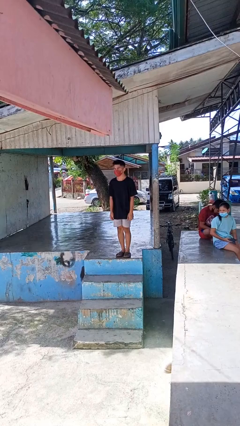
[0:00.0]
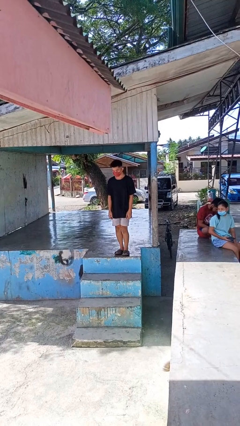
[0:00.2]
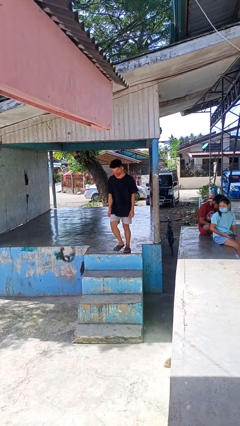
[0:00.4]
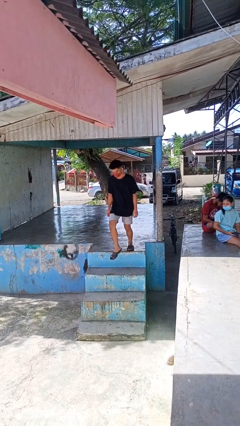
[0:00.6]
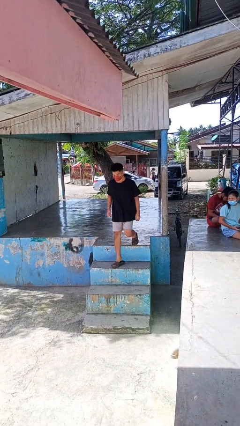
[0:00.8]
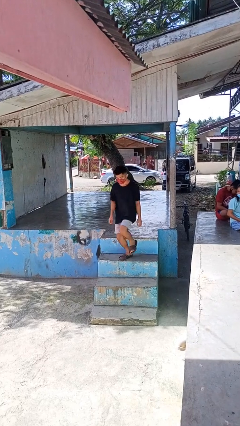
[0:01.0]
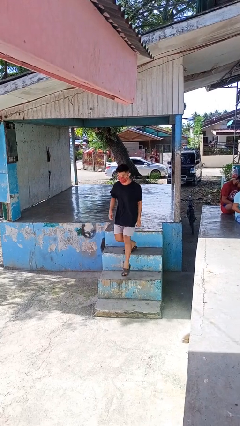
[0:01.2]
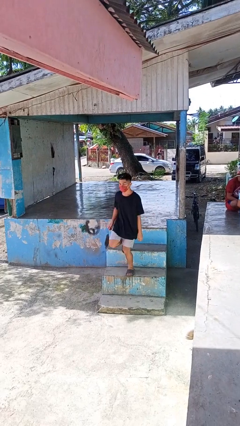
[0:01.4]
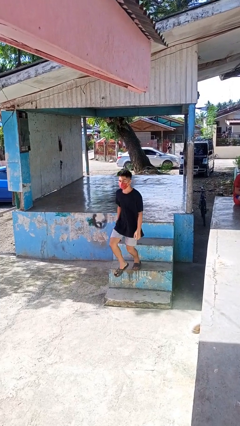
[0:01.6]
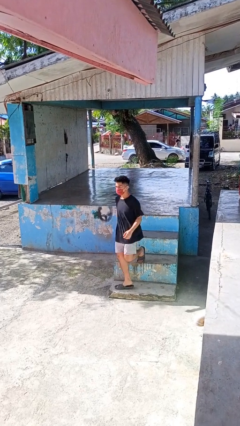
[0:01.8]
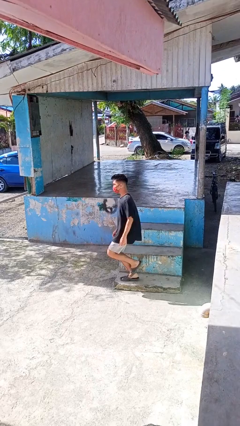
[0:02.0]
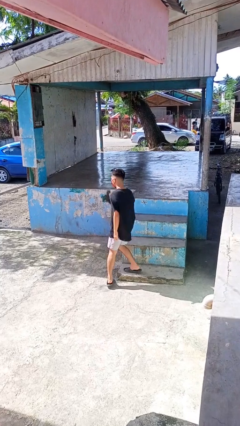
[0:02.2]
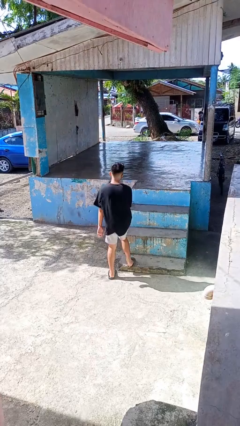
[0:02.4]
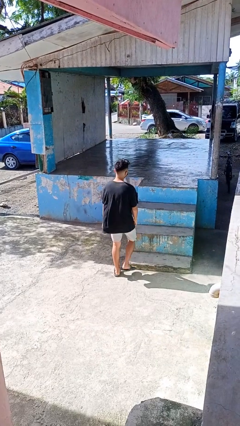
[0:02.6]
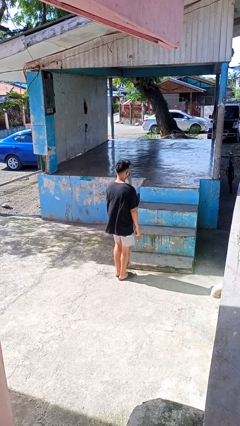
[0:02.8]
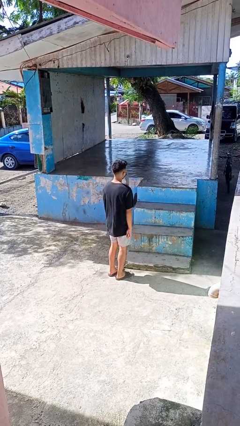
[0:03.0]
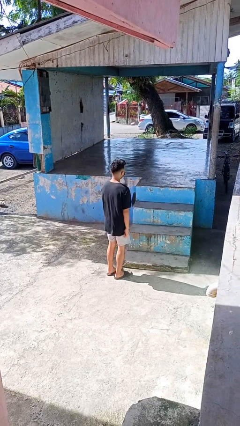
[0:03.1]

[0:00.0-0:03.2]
person climbs down stairs

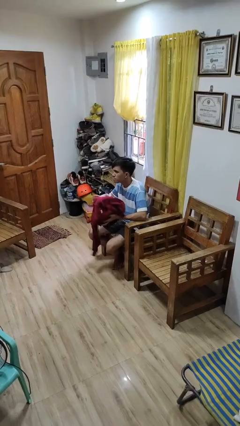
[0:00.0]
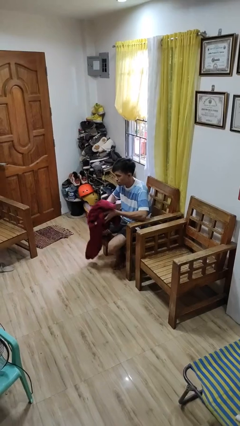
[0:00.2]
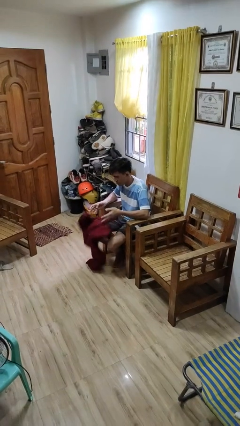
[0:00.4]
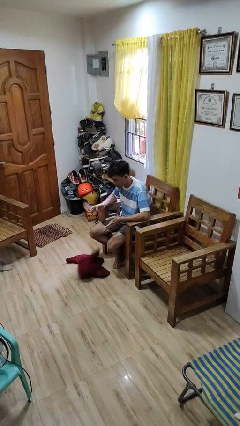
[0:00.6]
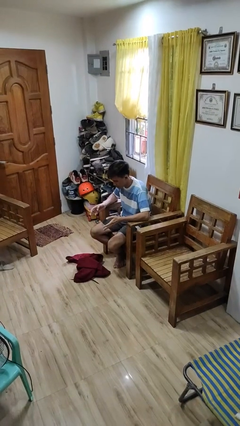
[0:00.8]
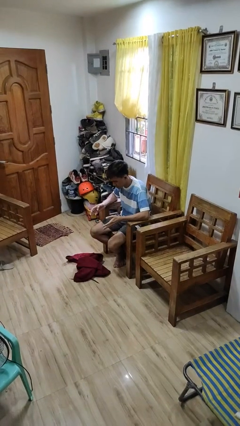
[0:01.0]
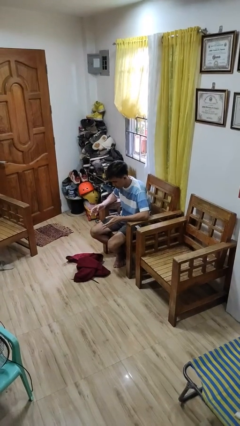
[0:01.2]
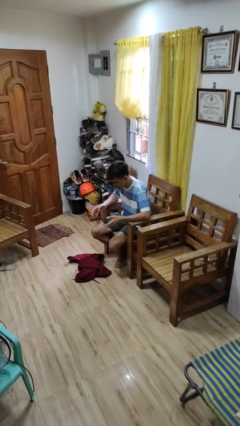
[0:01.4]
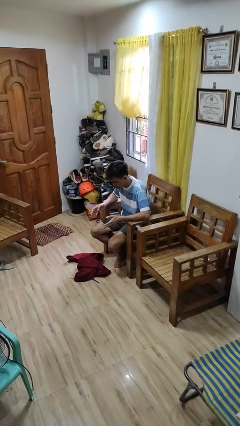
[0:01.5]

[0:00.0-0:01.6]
person drops object

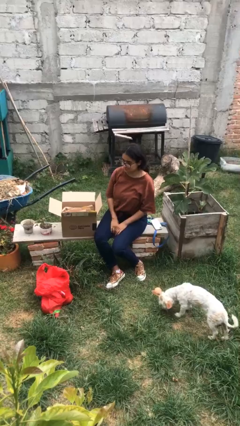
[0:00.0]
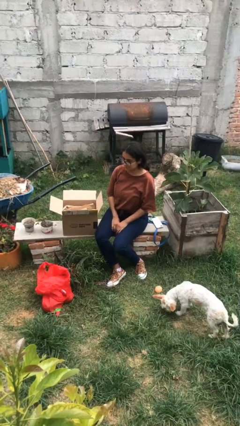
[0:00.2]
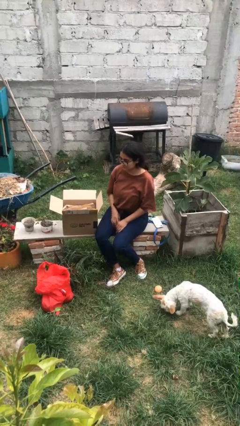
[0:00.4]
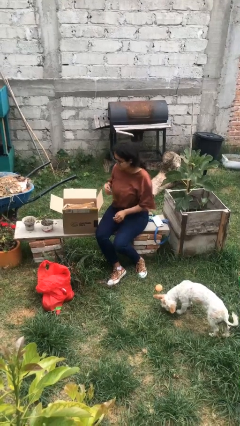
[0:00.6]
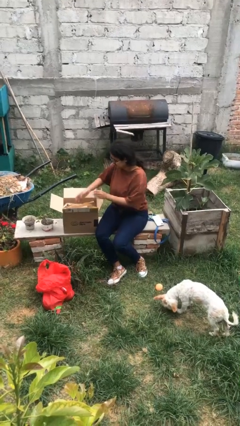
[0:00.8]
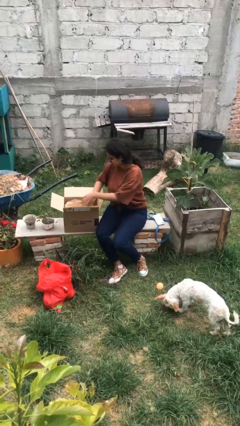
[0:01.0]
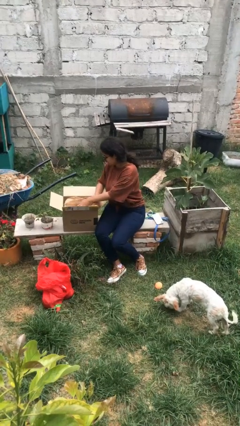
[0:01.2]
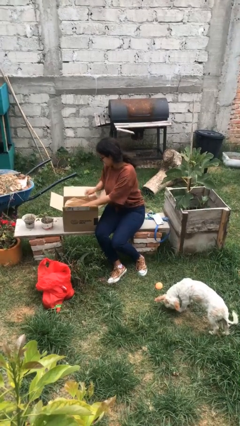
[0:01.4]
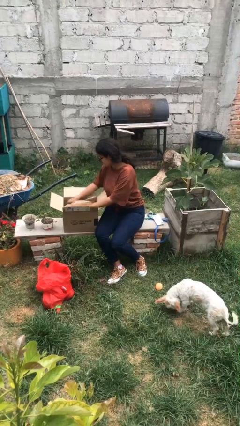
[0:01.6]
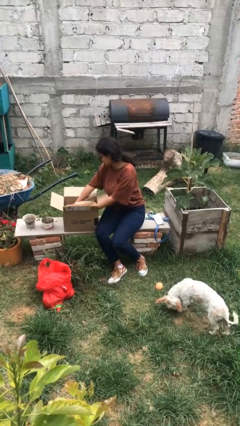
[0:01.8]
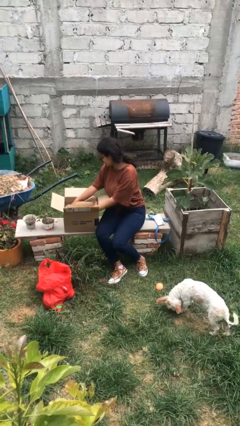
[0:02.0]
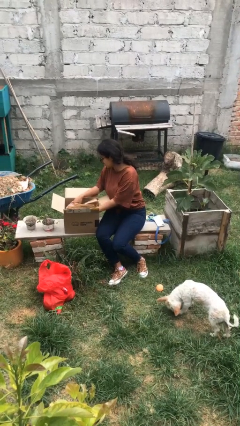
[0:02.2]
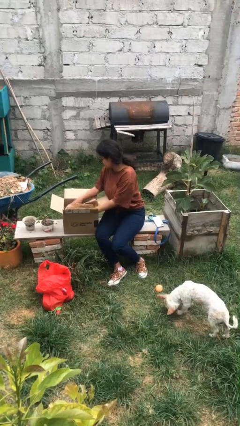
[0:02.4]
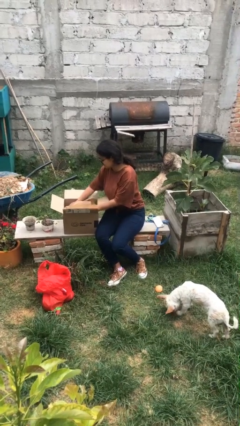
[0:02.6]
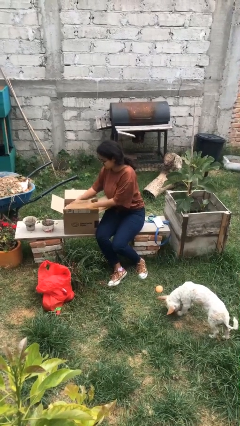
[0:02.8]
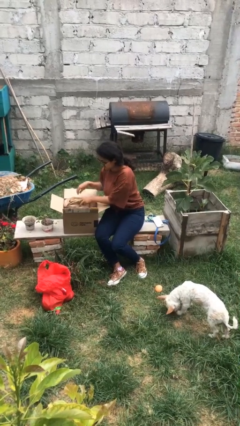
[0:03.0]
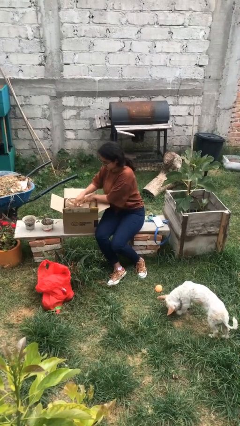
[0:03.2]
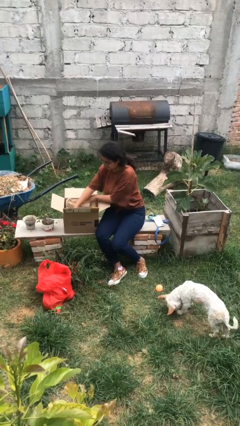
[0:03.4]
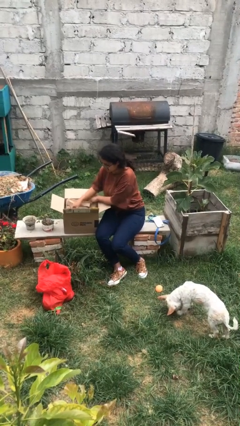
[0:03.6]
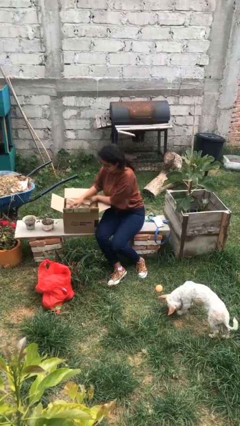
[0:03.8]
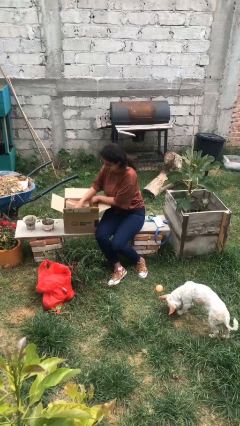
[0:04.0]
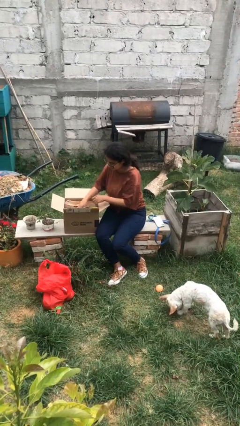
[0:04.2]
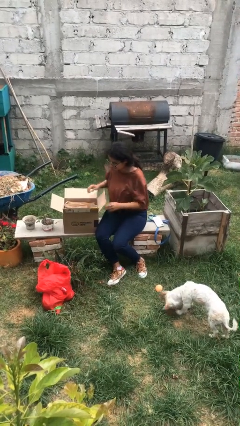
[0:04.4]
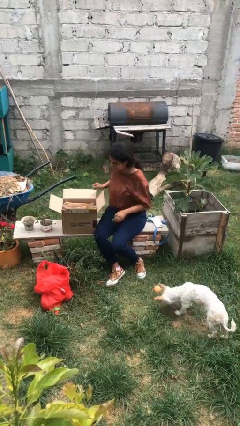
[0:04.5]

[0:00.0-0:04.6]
person searches in box

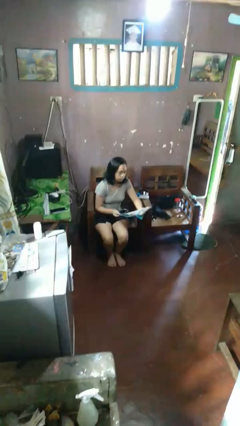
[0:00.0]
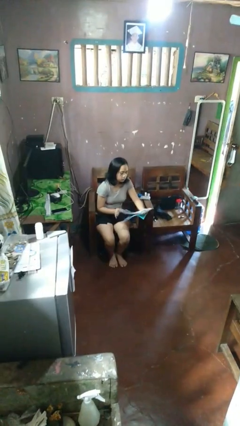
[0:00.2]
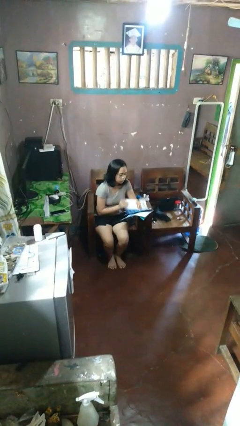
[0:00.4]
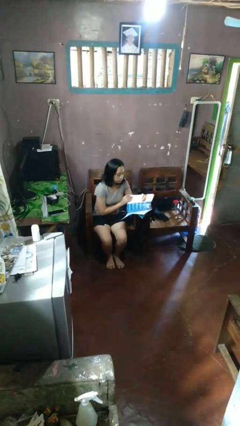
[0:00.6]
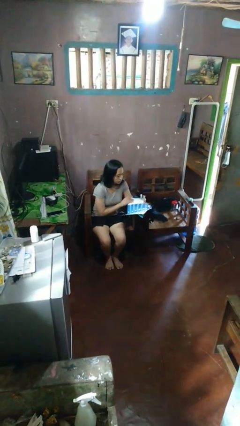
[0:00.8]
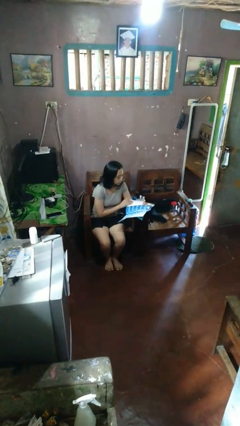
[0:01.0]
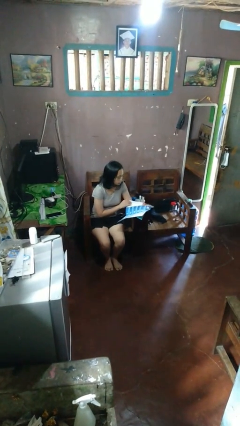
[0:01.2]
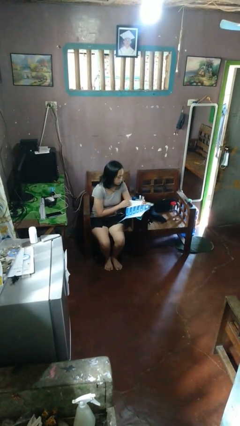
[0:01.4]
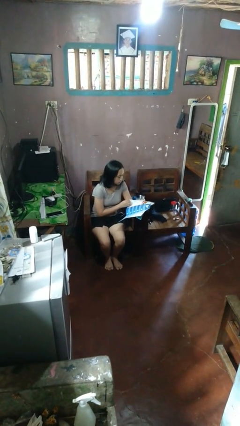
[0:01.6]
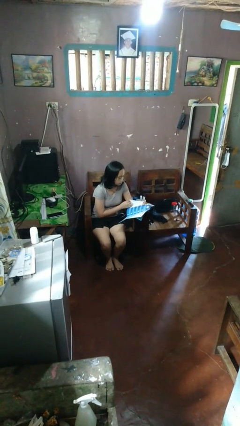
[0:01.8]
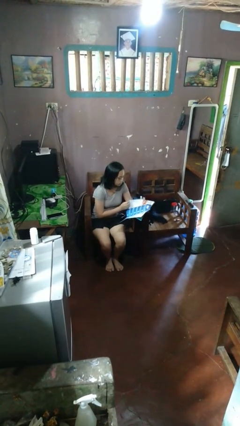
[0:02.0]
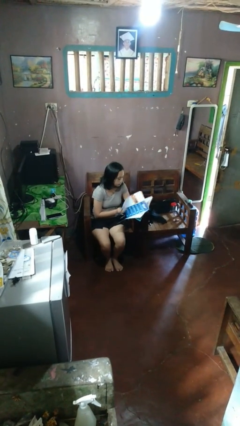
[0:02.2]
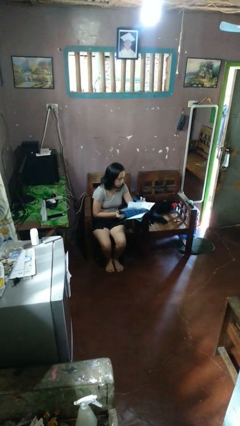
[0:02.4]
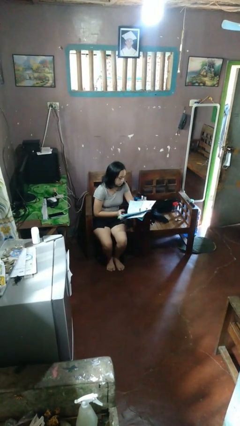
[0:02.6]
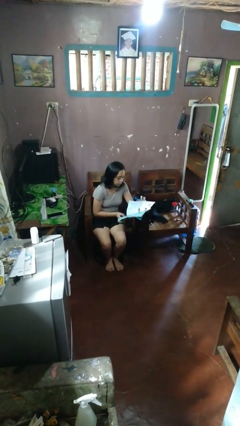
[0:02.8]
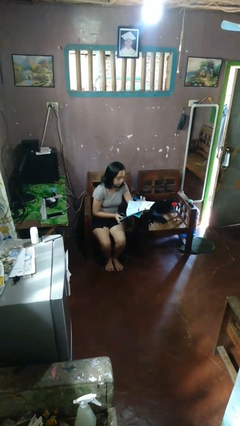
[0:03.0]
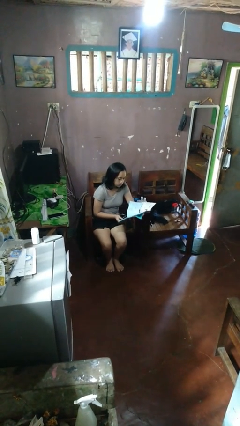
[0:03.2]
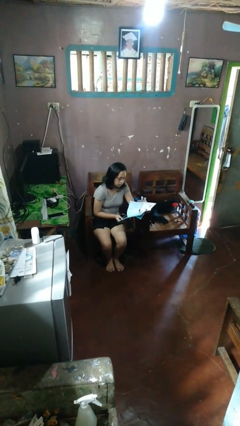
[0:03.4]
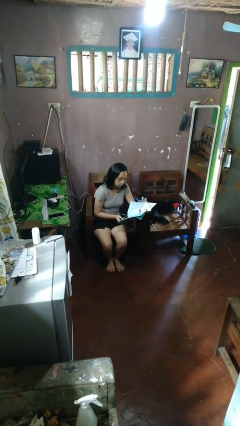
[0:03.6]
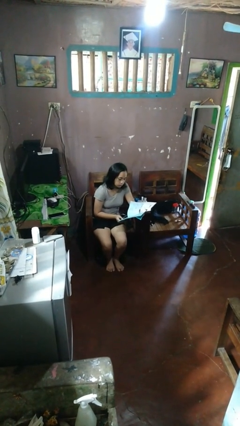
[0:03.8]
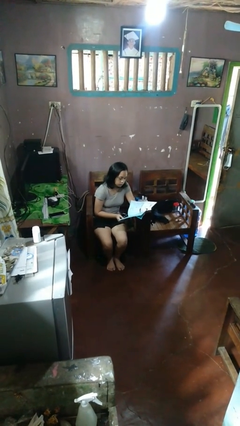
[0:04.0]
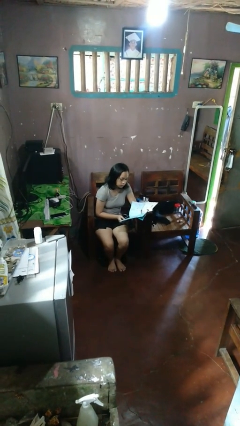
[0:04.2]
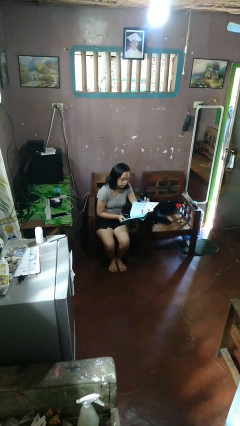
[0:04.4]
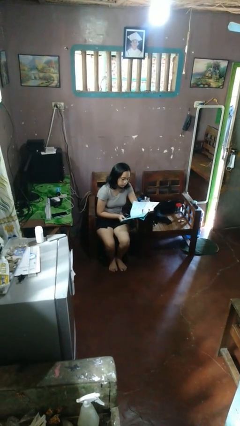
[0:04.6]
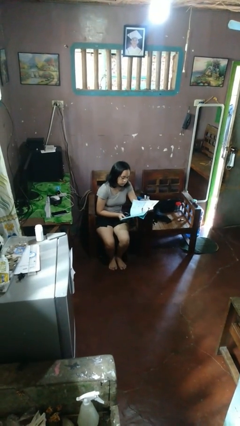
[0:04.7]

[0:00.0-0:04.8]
person reads magazine

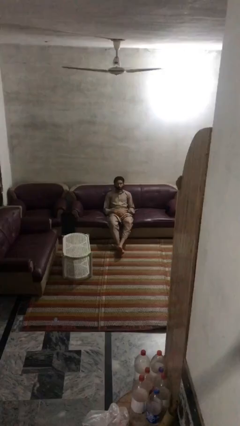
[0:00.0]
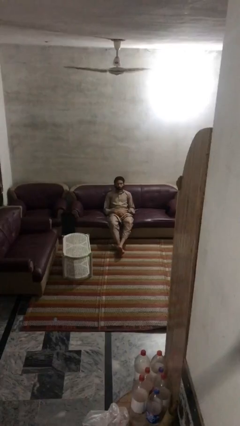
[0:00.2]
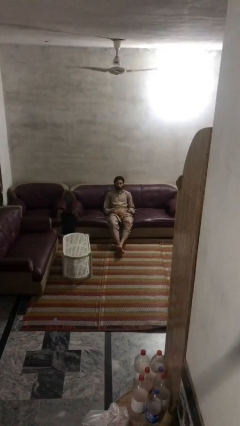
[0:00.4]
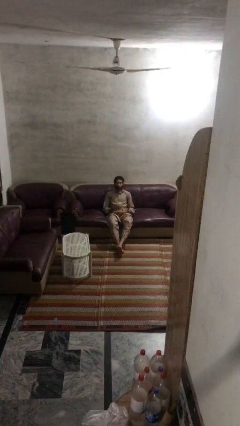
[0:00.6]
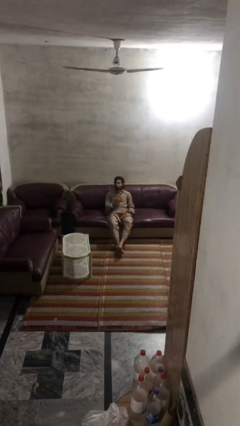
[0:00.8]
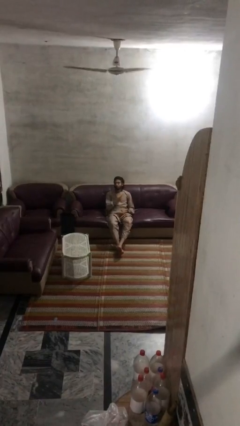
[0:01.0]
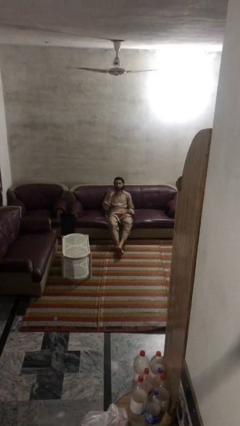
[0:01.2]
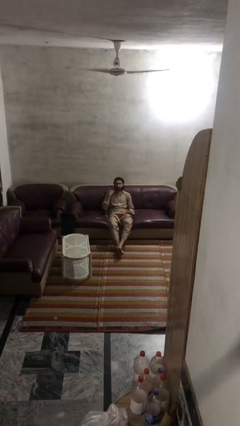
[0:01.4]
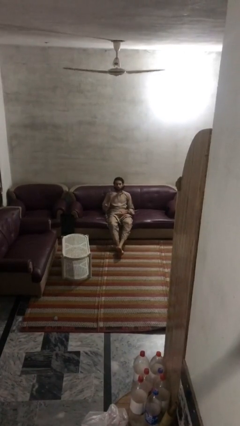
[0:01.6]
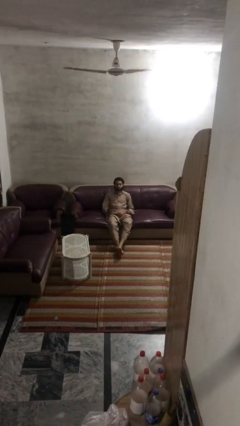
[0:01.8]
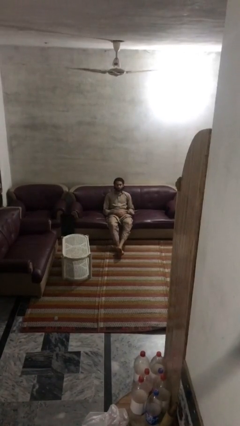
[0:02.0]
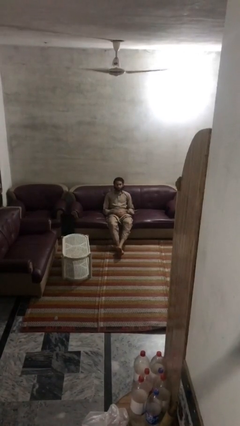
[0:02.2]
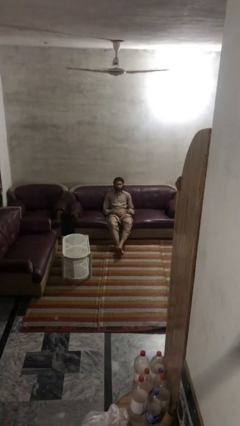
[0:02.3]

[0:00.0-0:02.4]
person gestures cut

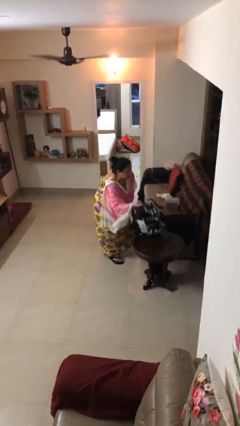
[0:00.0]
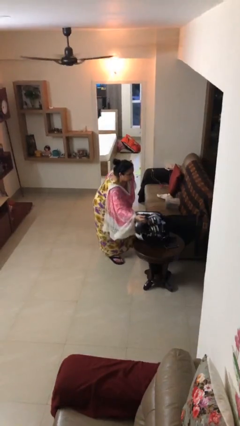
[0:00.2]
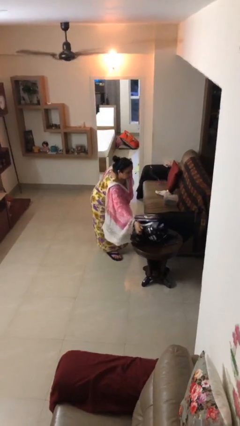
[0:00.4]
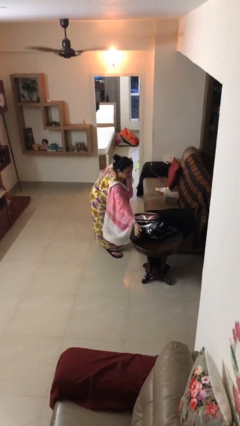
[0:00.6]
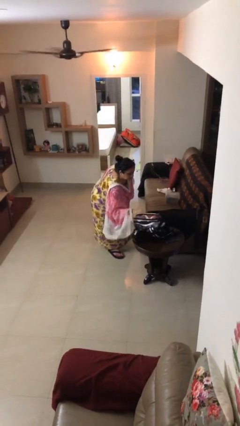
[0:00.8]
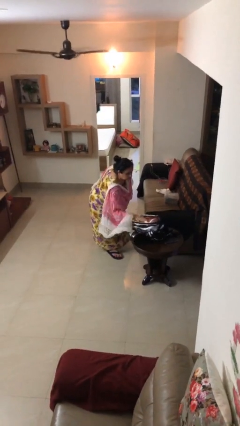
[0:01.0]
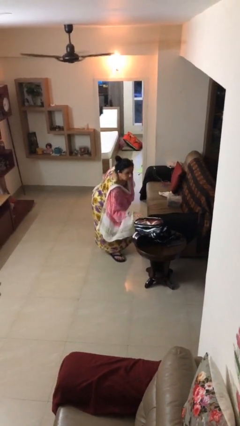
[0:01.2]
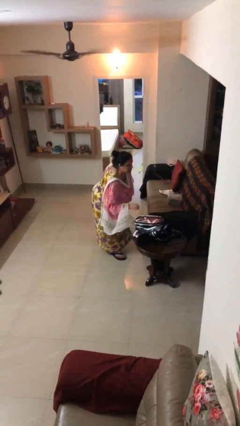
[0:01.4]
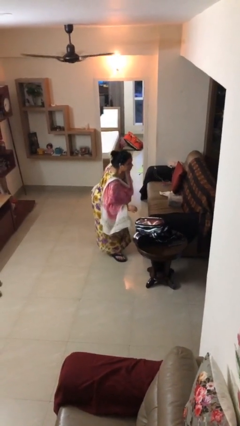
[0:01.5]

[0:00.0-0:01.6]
person puts down object on table
